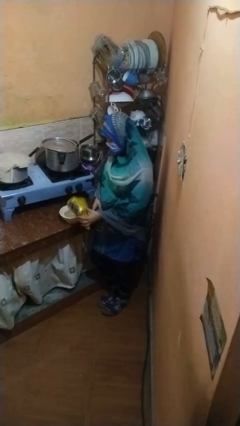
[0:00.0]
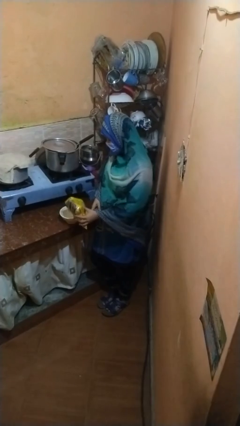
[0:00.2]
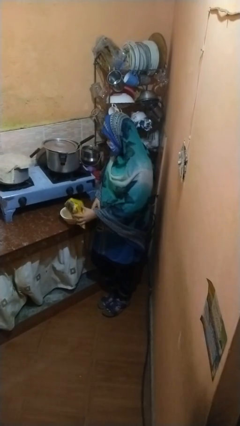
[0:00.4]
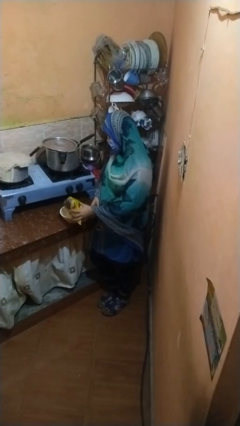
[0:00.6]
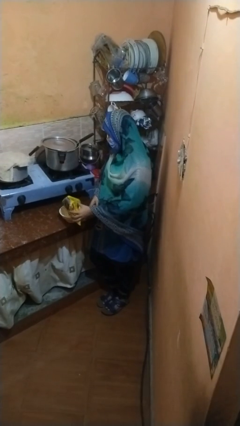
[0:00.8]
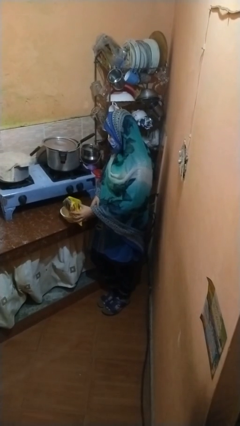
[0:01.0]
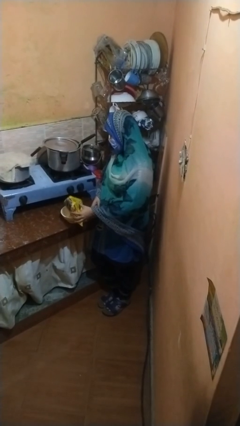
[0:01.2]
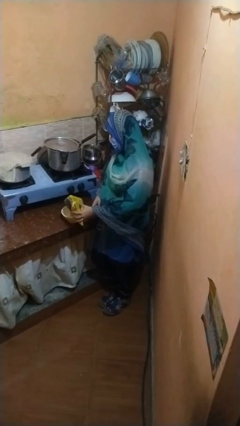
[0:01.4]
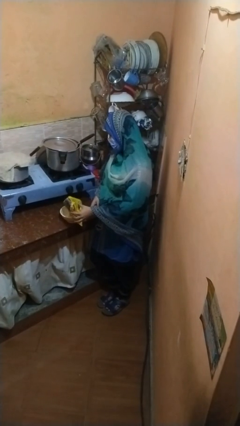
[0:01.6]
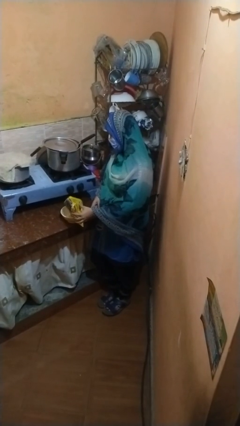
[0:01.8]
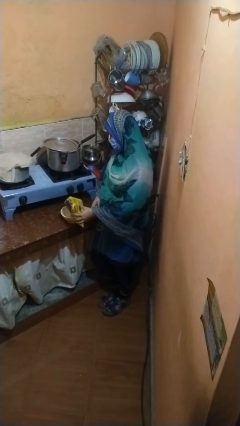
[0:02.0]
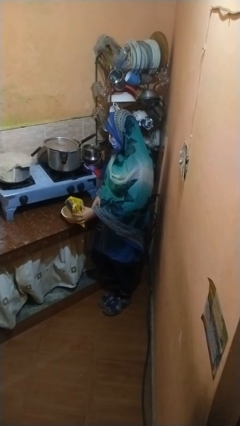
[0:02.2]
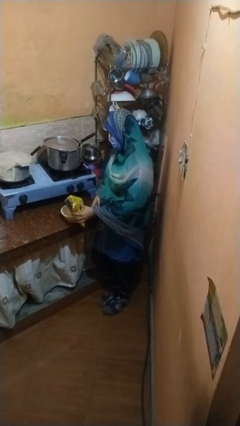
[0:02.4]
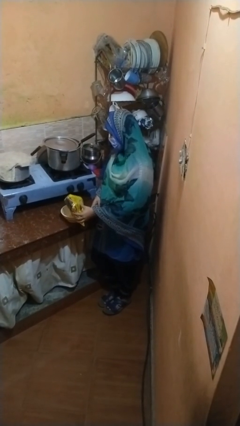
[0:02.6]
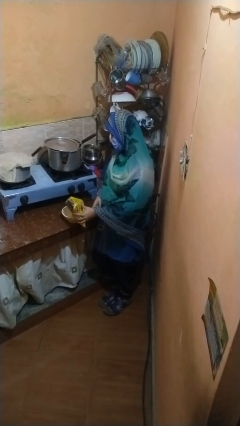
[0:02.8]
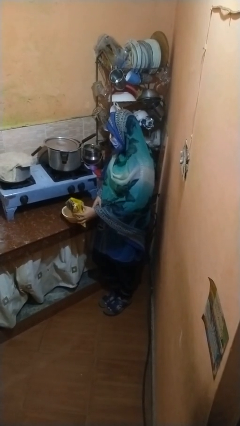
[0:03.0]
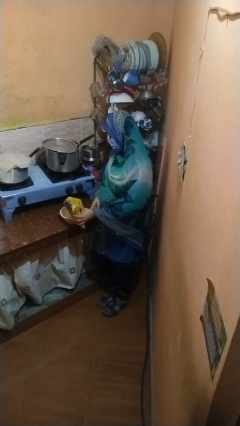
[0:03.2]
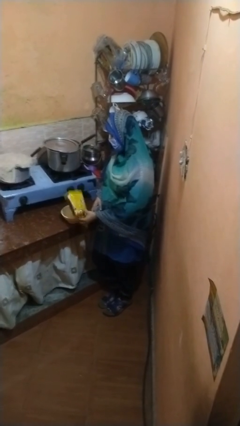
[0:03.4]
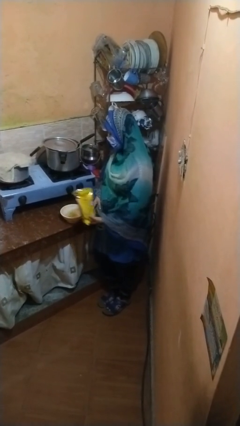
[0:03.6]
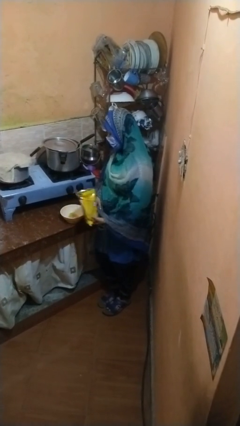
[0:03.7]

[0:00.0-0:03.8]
person pours into bowl

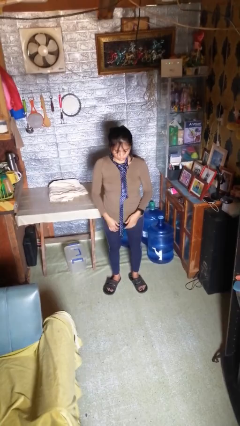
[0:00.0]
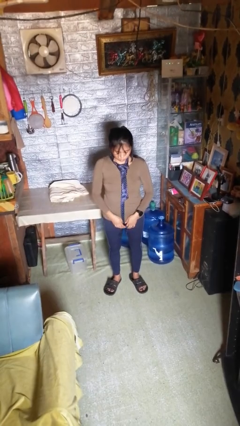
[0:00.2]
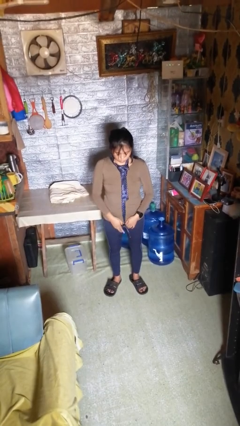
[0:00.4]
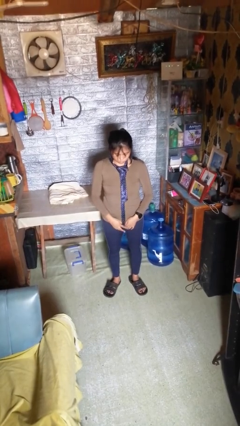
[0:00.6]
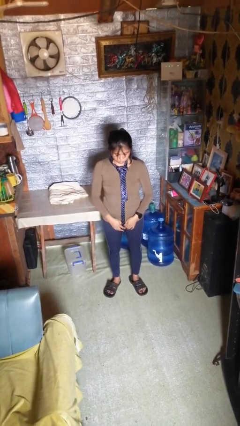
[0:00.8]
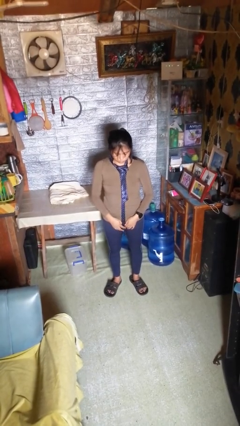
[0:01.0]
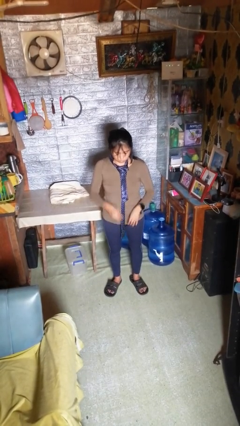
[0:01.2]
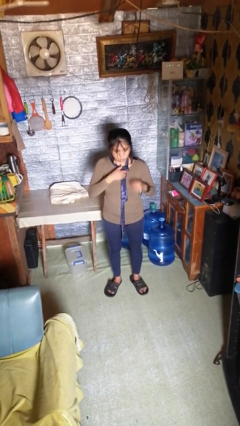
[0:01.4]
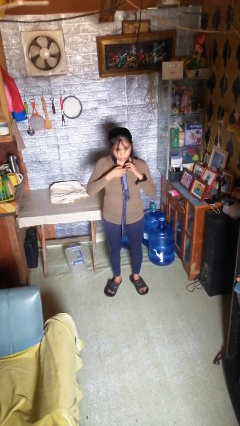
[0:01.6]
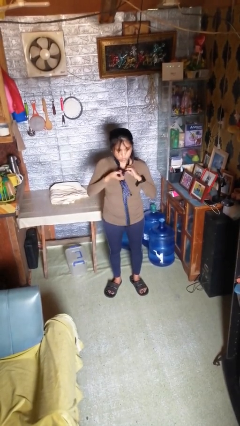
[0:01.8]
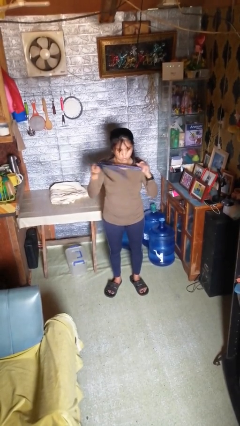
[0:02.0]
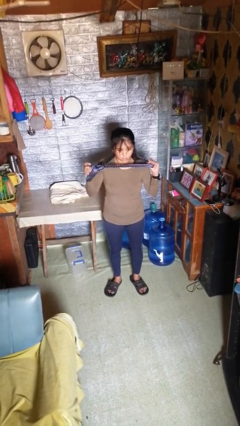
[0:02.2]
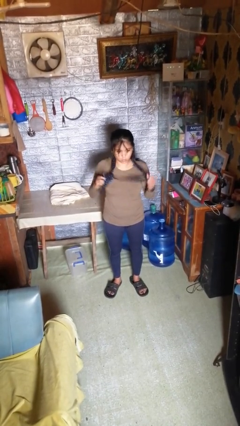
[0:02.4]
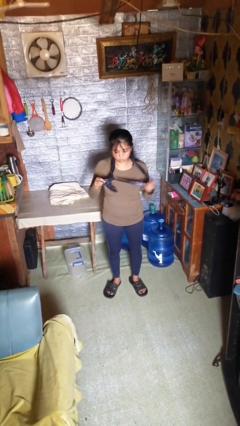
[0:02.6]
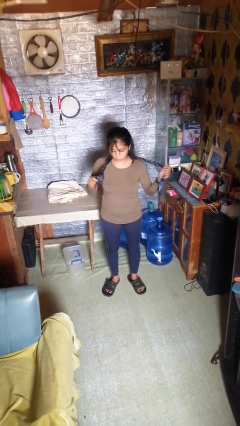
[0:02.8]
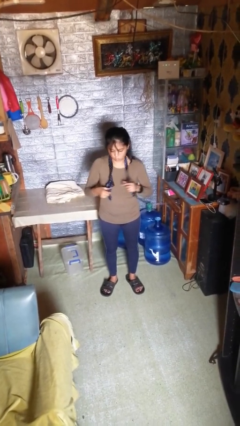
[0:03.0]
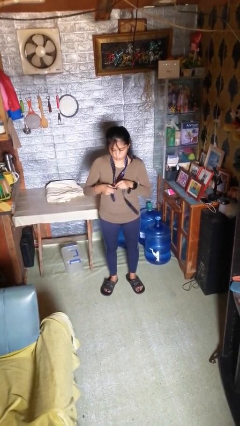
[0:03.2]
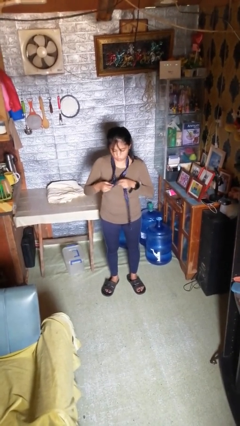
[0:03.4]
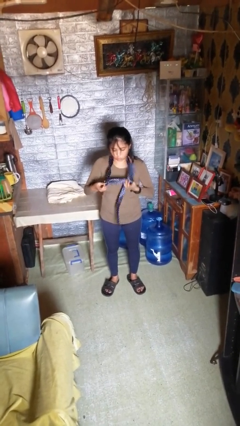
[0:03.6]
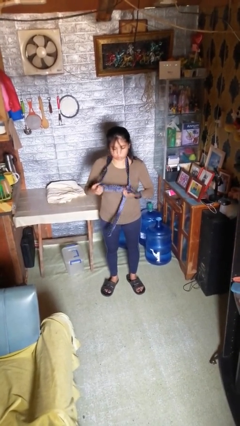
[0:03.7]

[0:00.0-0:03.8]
person takes off necktie

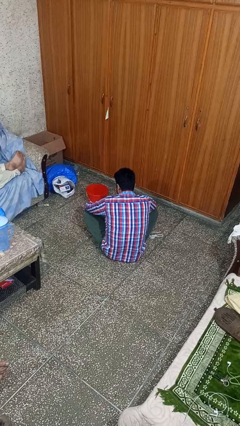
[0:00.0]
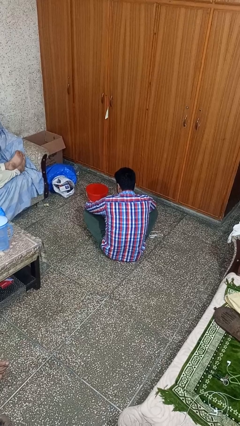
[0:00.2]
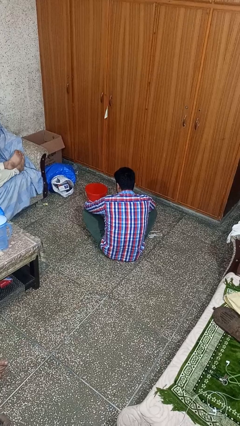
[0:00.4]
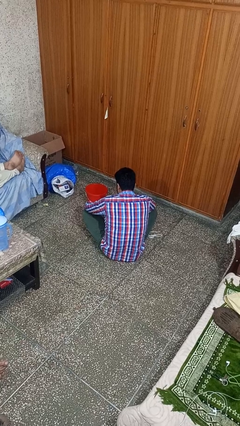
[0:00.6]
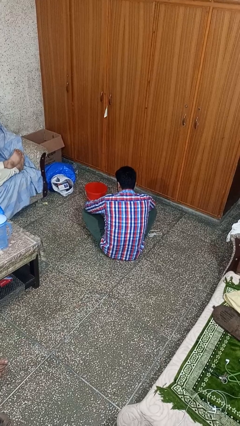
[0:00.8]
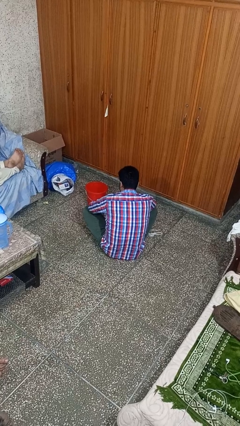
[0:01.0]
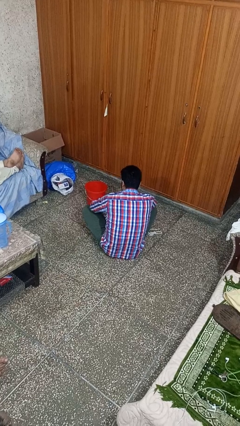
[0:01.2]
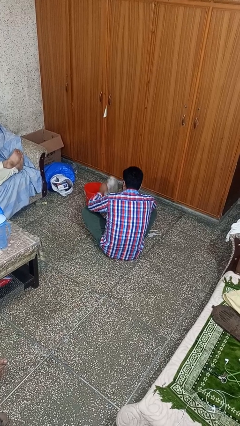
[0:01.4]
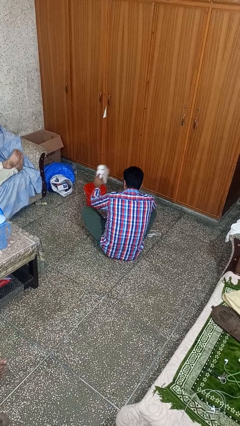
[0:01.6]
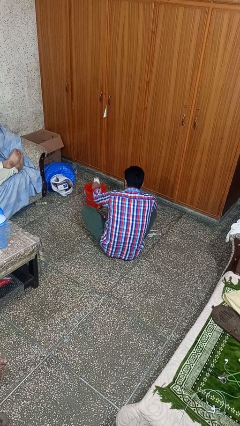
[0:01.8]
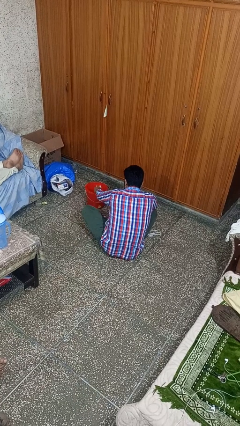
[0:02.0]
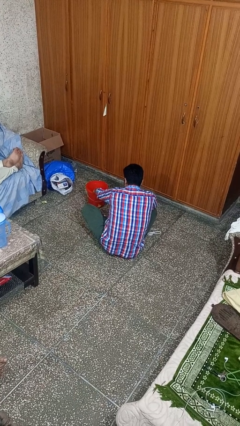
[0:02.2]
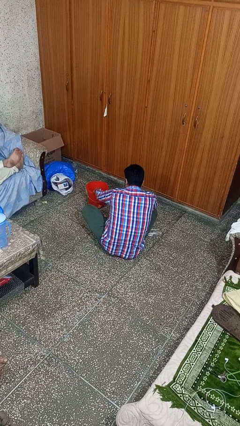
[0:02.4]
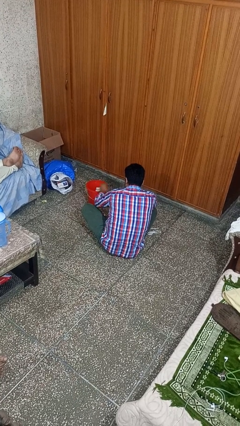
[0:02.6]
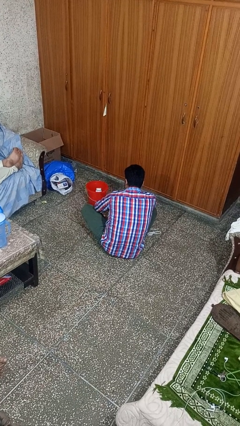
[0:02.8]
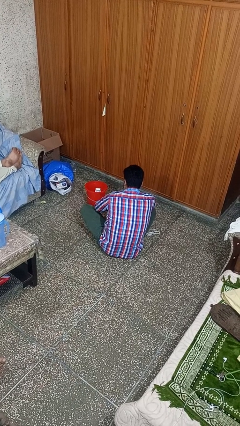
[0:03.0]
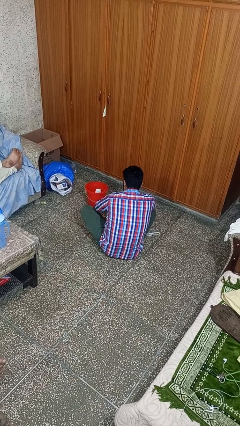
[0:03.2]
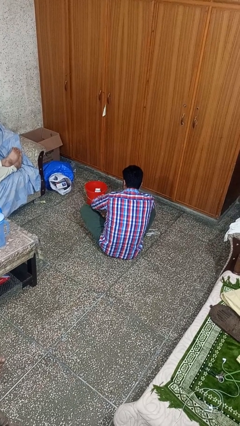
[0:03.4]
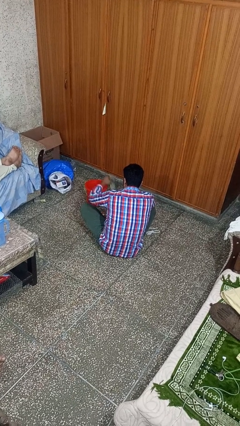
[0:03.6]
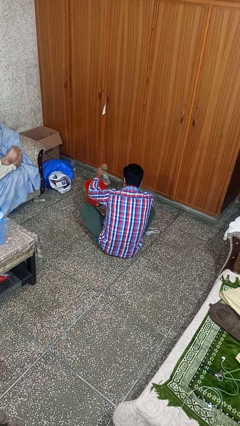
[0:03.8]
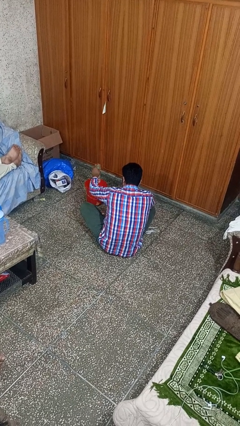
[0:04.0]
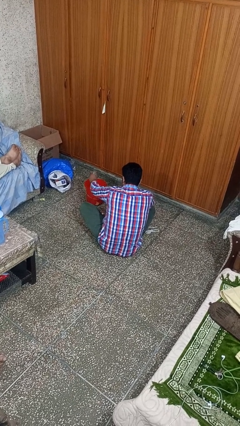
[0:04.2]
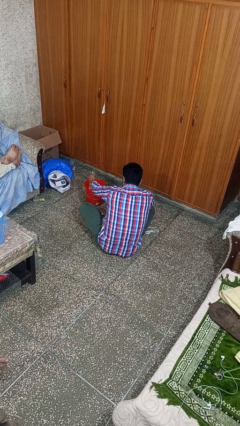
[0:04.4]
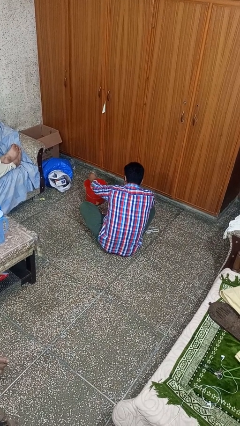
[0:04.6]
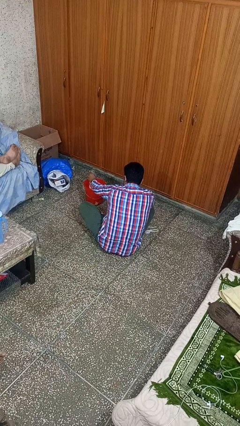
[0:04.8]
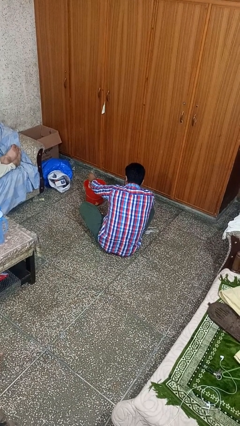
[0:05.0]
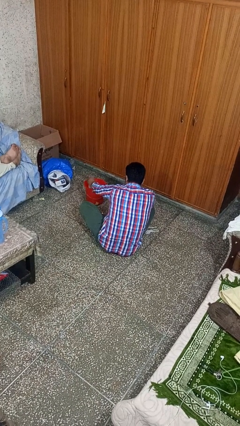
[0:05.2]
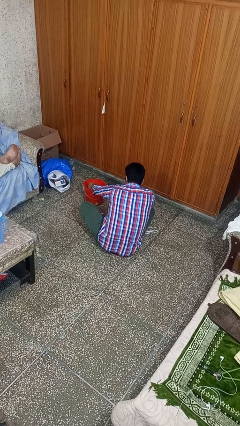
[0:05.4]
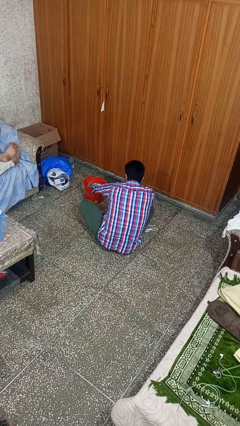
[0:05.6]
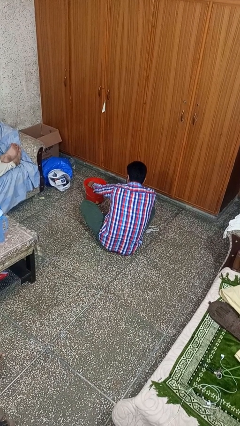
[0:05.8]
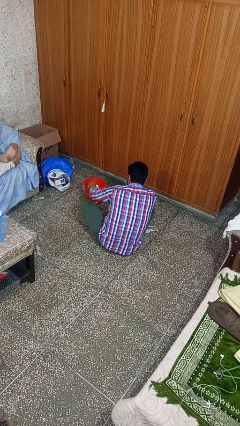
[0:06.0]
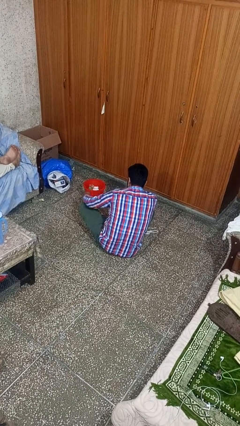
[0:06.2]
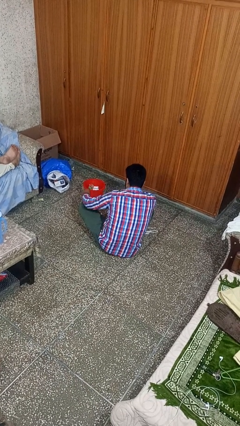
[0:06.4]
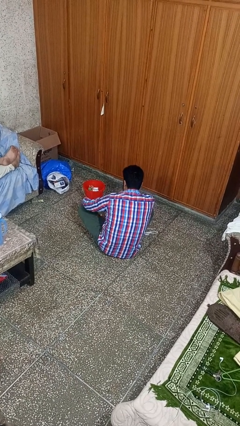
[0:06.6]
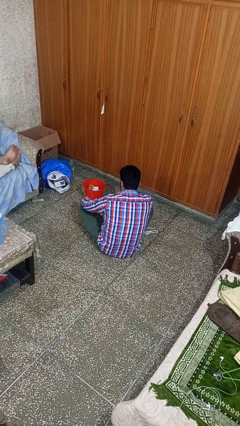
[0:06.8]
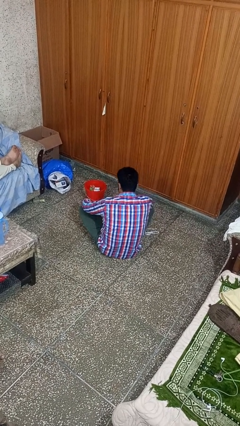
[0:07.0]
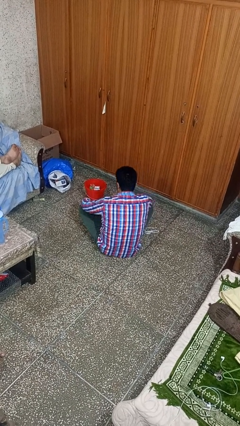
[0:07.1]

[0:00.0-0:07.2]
person puts object into basket

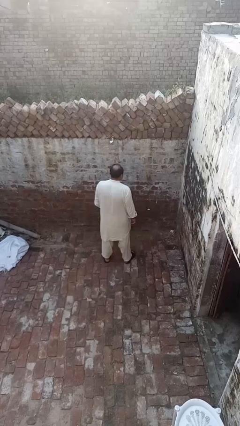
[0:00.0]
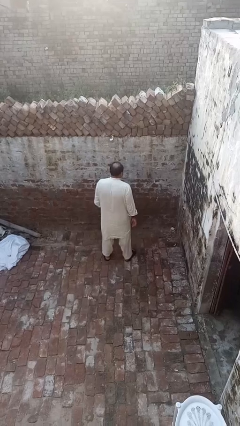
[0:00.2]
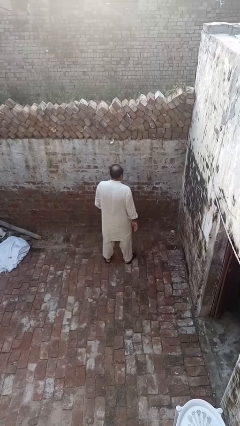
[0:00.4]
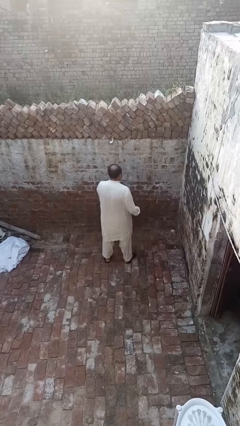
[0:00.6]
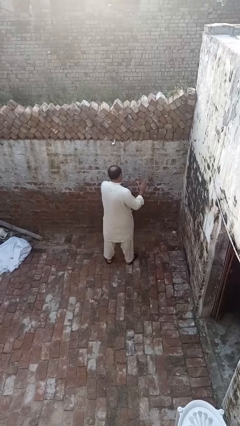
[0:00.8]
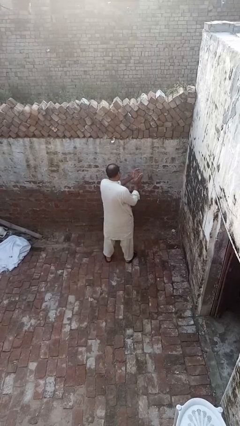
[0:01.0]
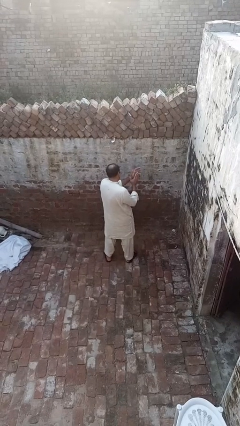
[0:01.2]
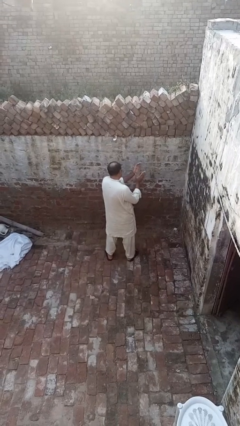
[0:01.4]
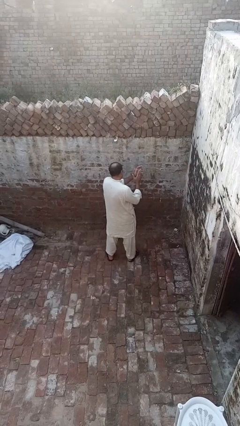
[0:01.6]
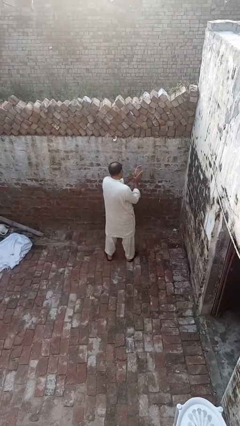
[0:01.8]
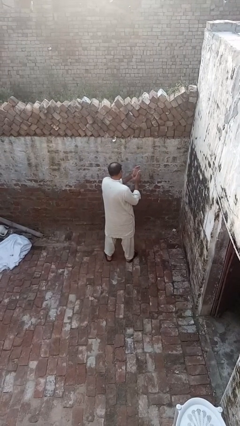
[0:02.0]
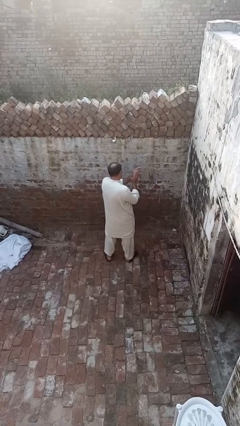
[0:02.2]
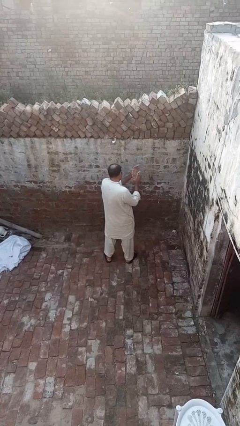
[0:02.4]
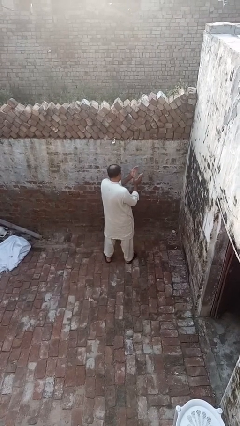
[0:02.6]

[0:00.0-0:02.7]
person claps hands

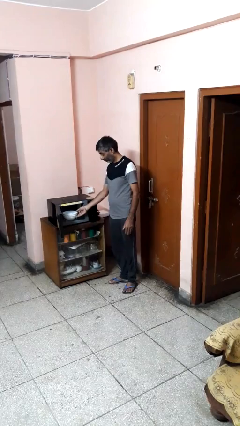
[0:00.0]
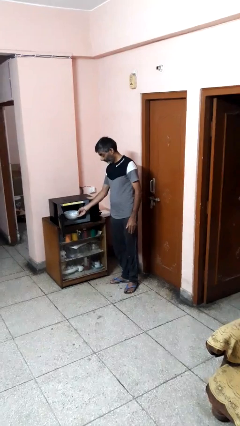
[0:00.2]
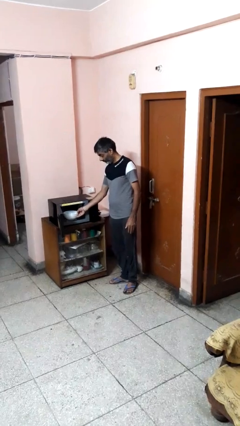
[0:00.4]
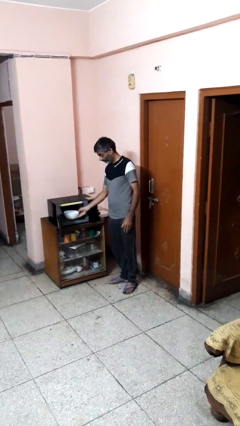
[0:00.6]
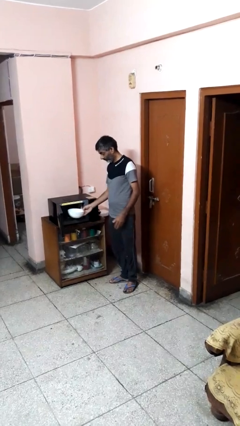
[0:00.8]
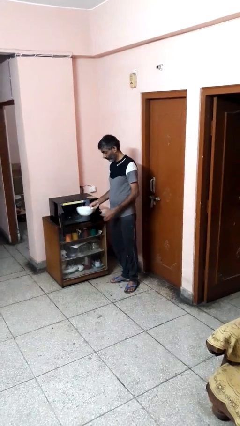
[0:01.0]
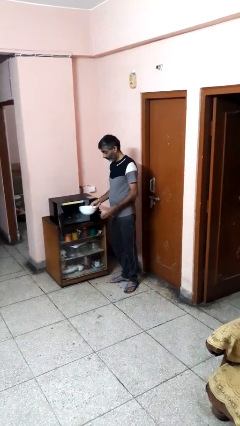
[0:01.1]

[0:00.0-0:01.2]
person takes object from microwave
